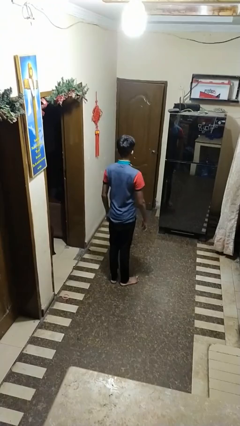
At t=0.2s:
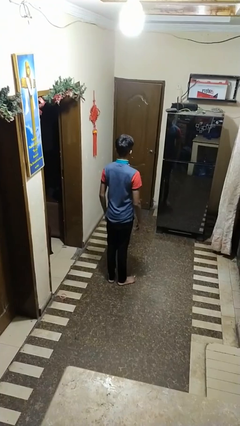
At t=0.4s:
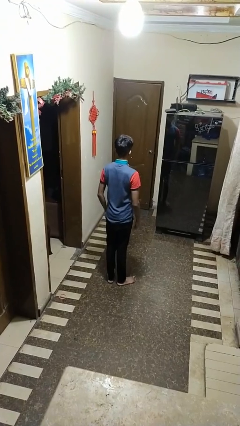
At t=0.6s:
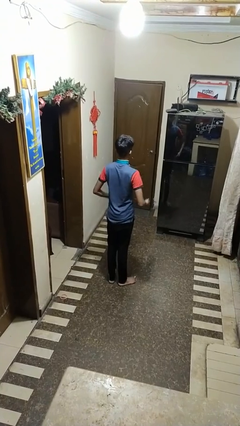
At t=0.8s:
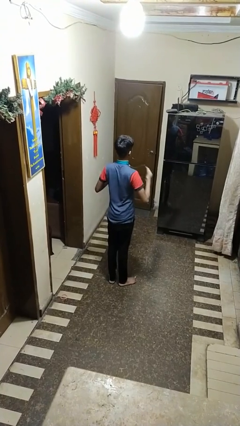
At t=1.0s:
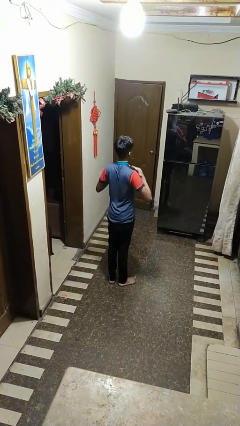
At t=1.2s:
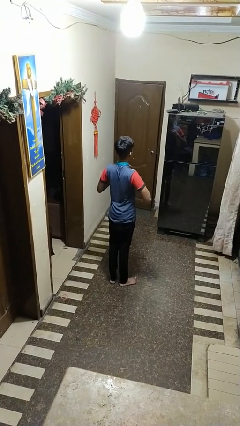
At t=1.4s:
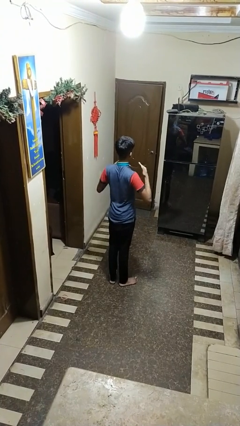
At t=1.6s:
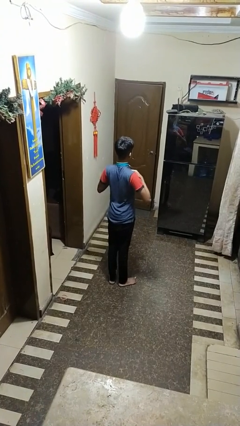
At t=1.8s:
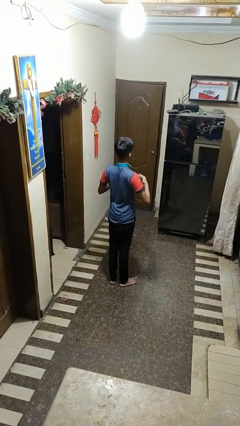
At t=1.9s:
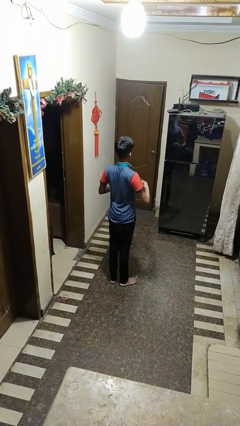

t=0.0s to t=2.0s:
person drums on chest

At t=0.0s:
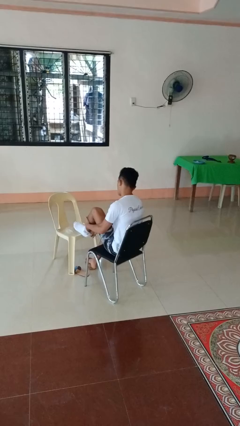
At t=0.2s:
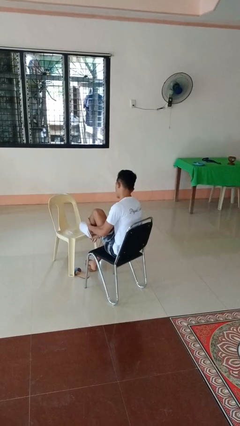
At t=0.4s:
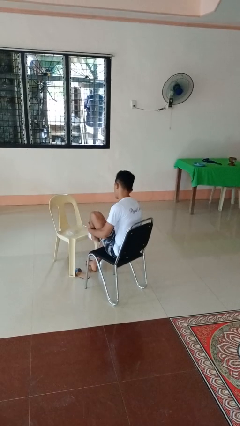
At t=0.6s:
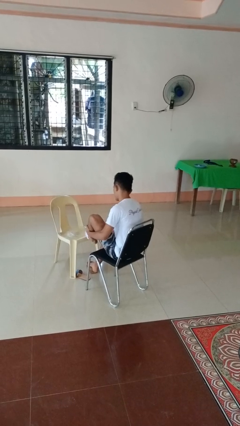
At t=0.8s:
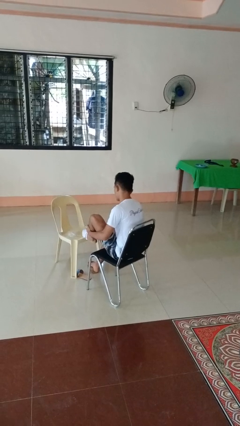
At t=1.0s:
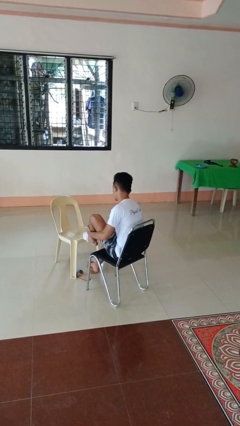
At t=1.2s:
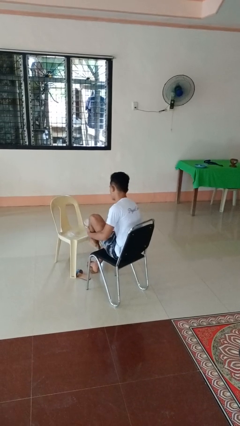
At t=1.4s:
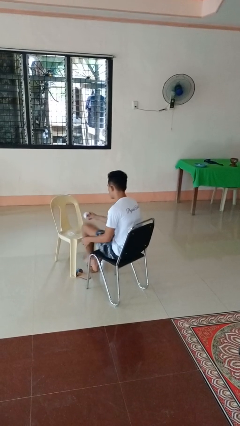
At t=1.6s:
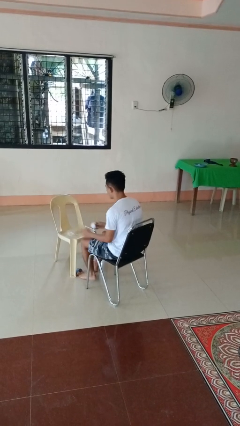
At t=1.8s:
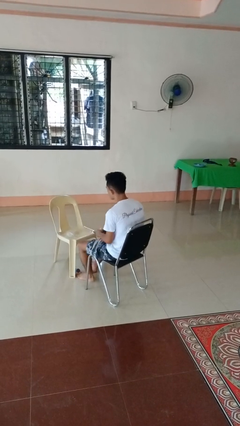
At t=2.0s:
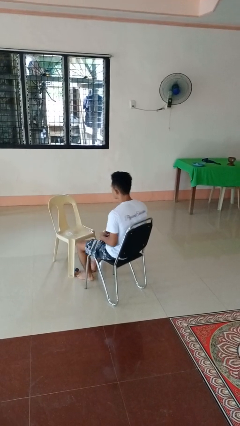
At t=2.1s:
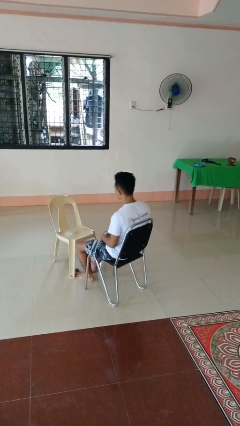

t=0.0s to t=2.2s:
person takes off socks

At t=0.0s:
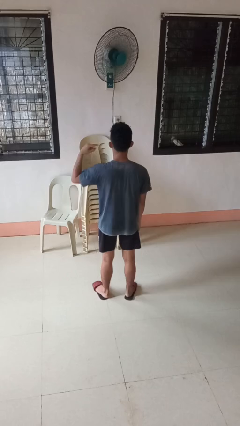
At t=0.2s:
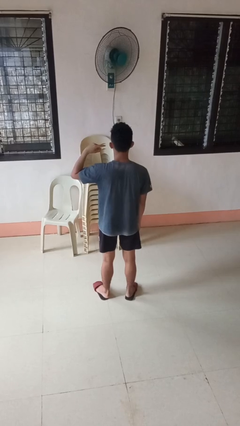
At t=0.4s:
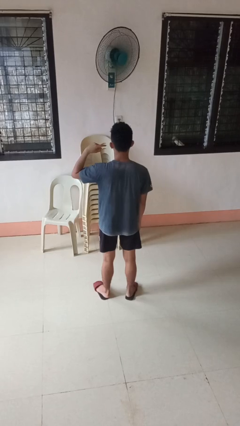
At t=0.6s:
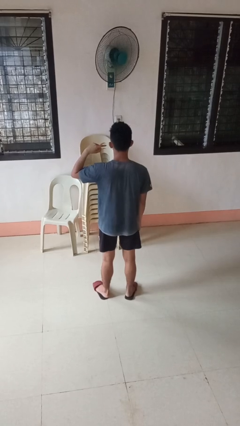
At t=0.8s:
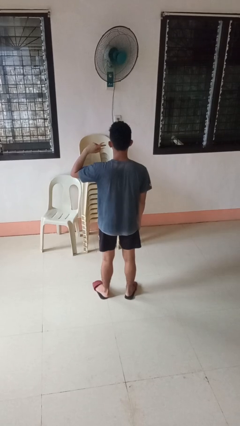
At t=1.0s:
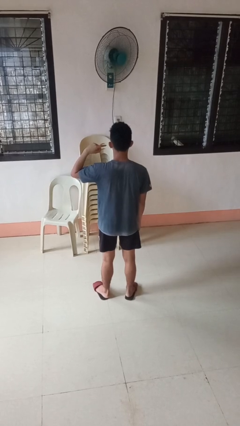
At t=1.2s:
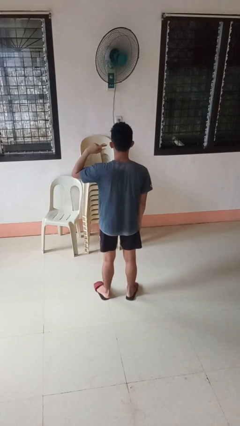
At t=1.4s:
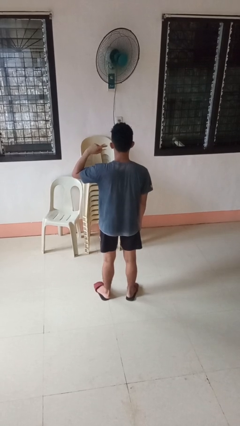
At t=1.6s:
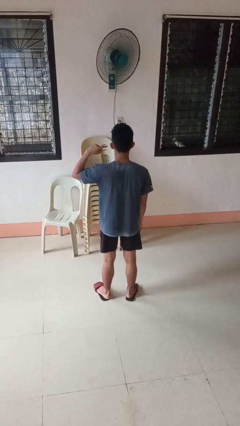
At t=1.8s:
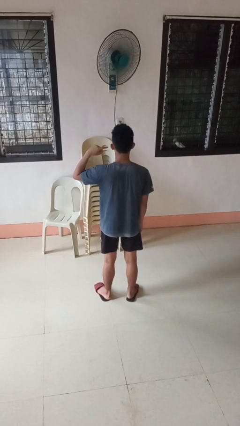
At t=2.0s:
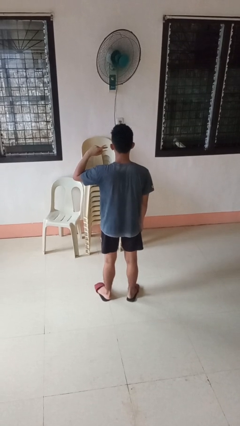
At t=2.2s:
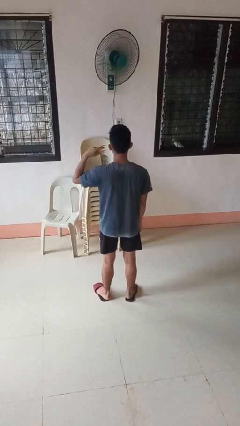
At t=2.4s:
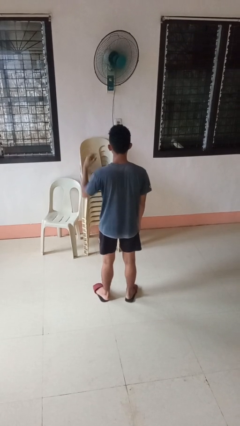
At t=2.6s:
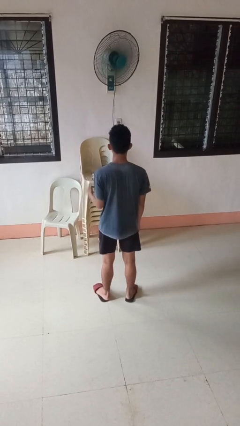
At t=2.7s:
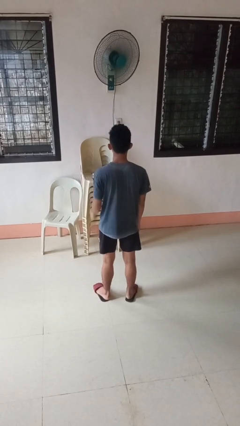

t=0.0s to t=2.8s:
person gestures listen closely

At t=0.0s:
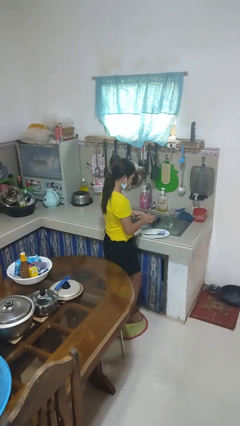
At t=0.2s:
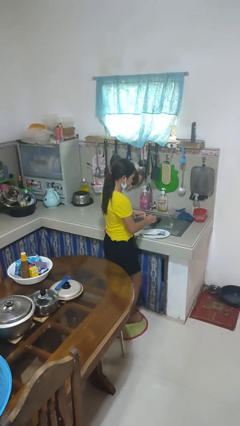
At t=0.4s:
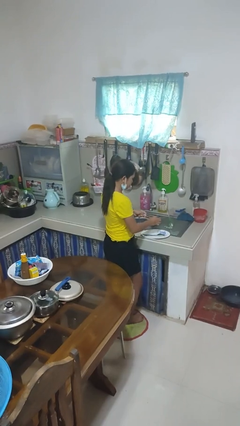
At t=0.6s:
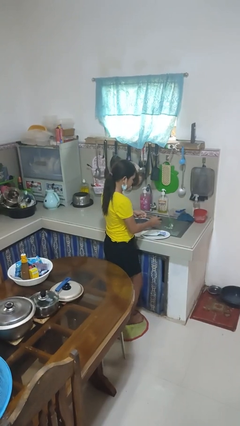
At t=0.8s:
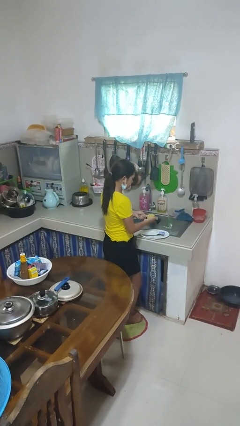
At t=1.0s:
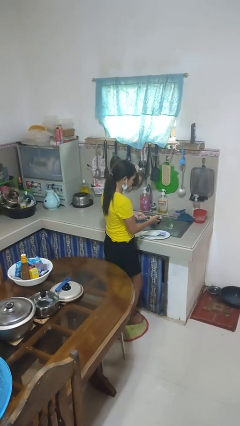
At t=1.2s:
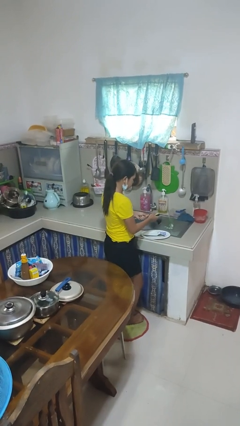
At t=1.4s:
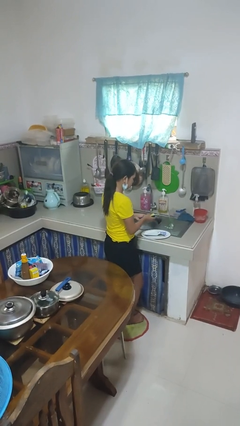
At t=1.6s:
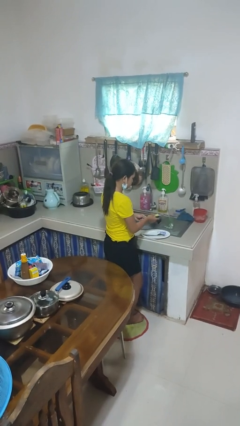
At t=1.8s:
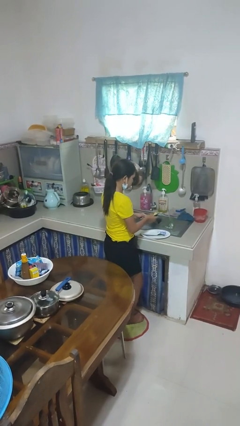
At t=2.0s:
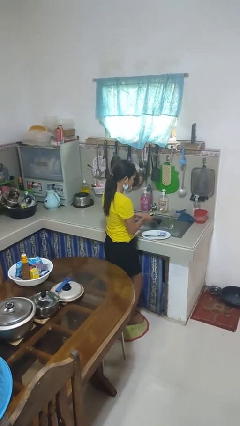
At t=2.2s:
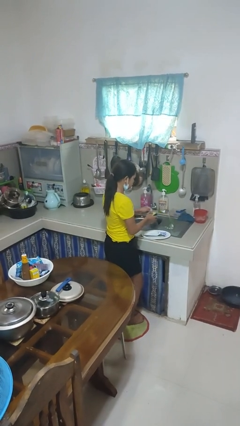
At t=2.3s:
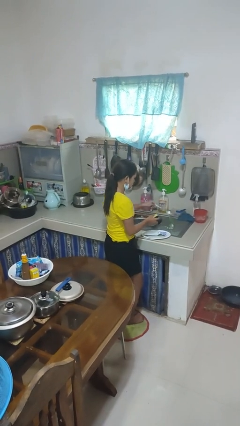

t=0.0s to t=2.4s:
person washes dish

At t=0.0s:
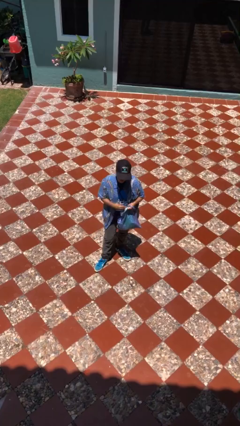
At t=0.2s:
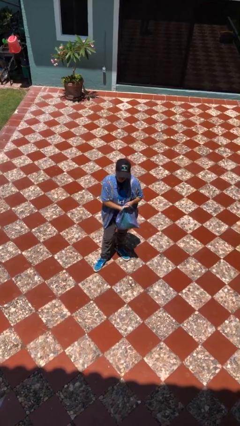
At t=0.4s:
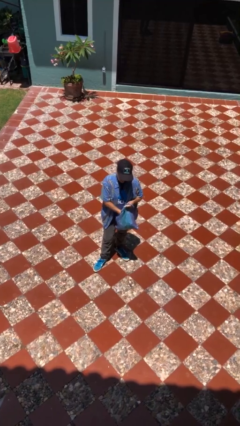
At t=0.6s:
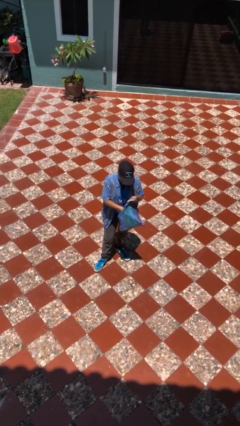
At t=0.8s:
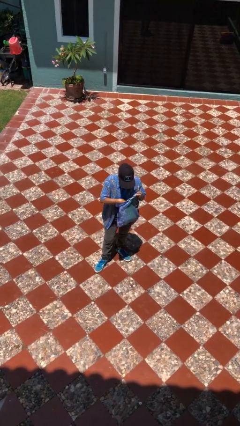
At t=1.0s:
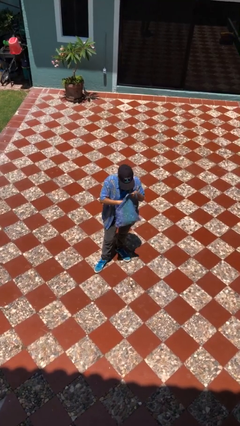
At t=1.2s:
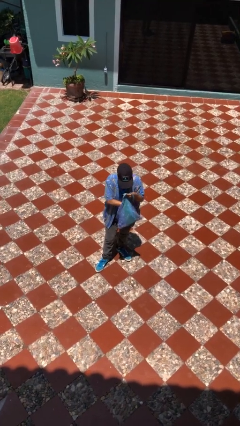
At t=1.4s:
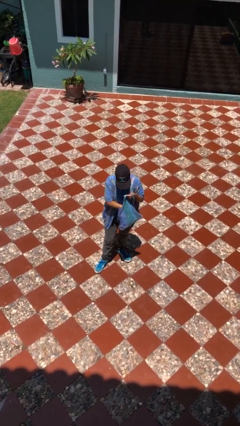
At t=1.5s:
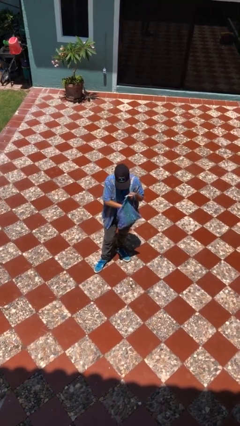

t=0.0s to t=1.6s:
person searches in purse

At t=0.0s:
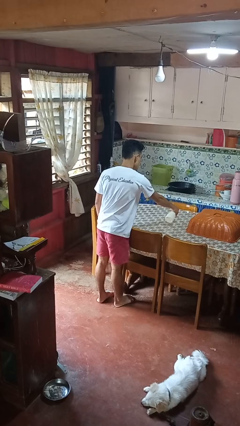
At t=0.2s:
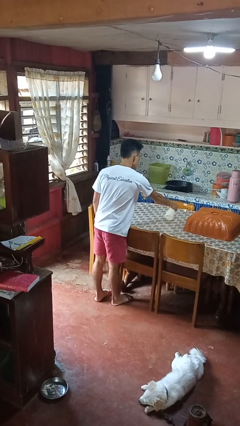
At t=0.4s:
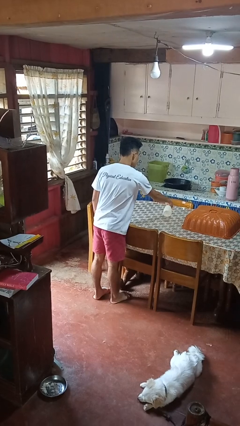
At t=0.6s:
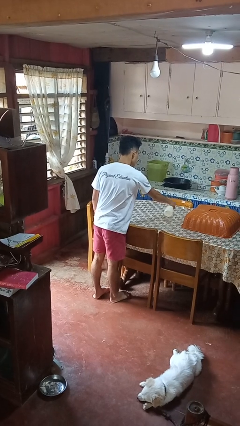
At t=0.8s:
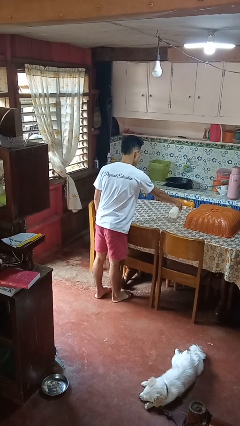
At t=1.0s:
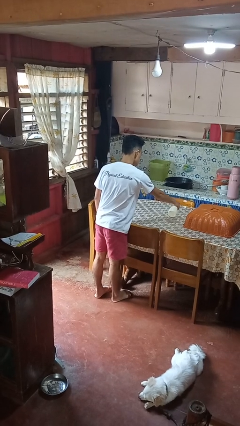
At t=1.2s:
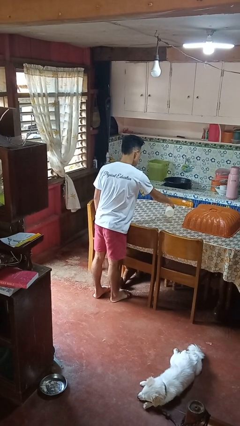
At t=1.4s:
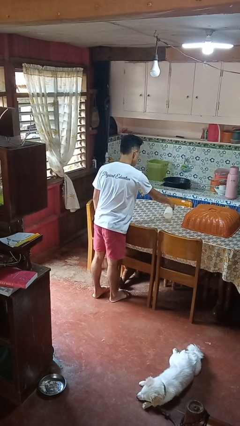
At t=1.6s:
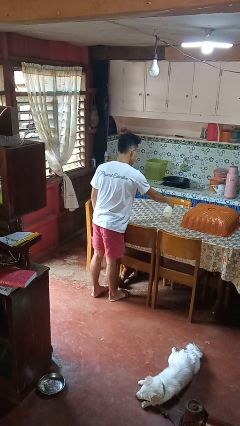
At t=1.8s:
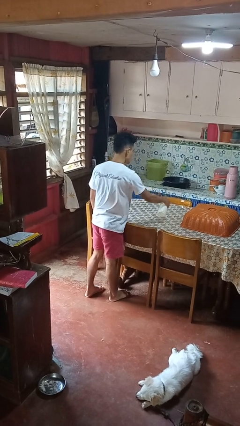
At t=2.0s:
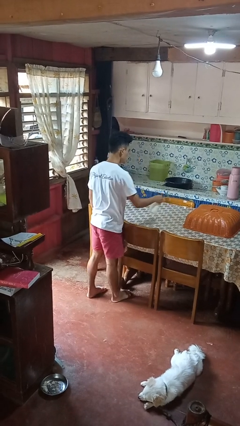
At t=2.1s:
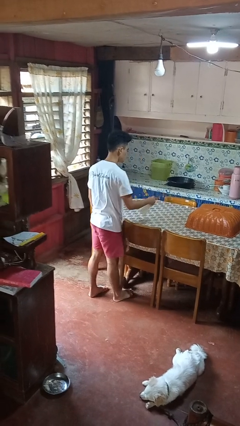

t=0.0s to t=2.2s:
person sprays from bottle

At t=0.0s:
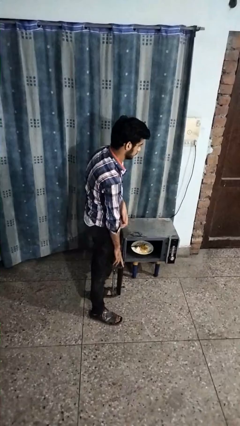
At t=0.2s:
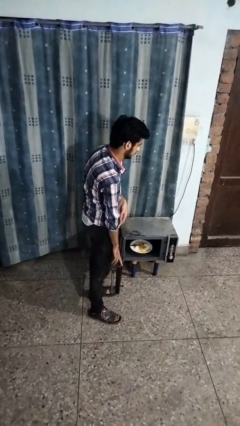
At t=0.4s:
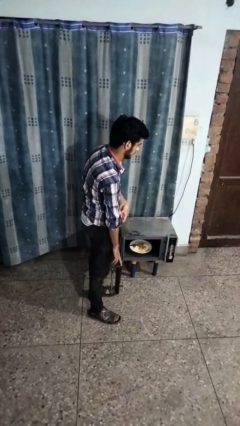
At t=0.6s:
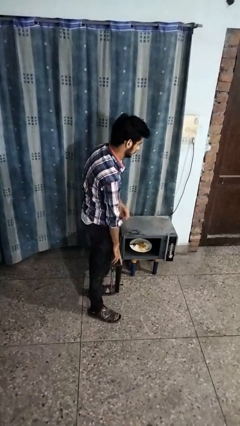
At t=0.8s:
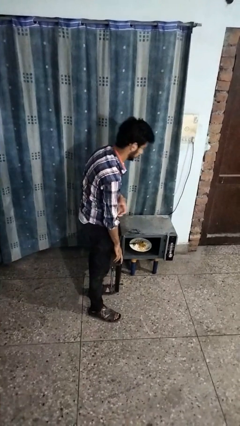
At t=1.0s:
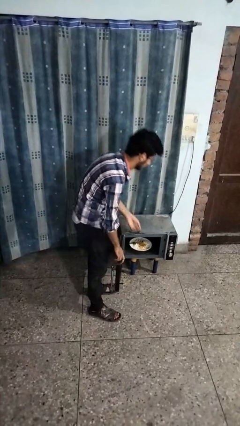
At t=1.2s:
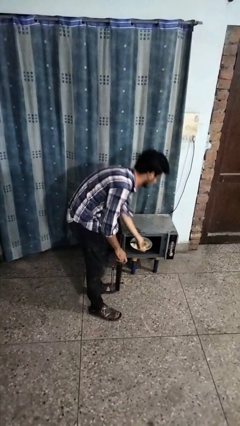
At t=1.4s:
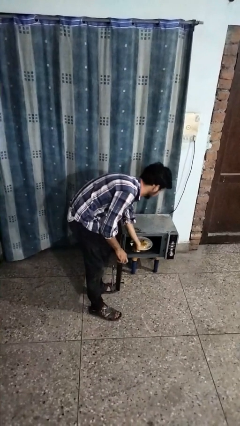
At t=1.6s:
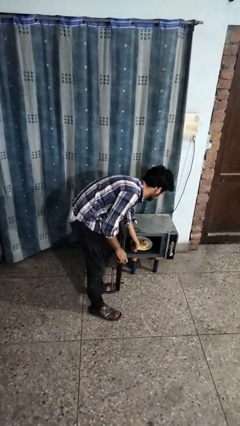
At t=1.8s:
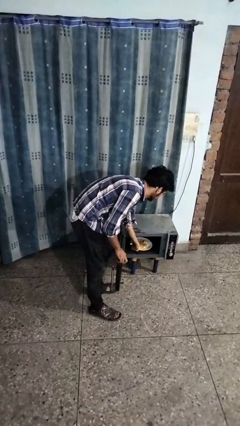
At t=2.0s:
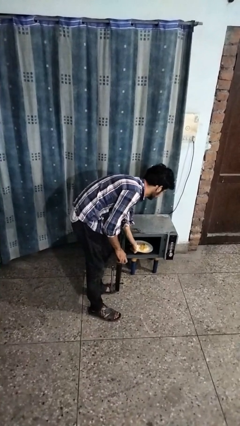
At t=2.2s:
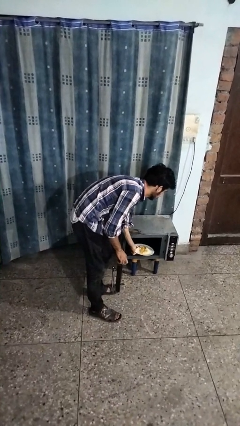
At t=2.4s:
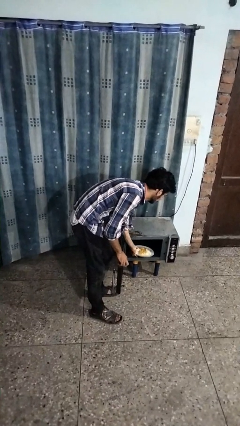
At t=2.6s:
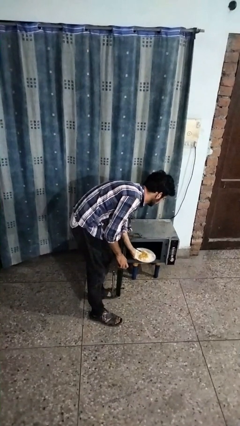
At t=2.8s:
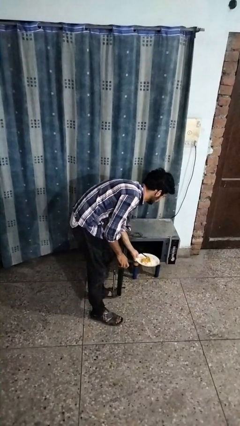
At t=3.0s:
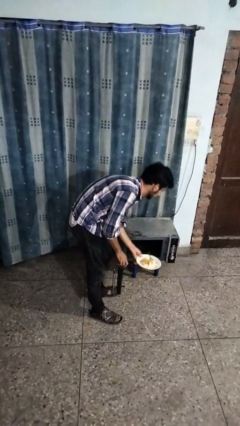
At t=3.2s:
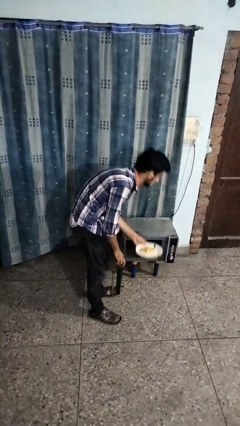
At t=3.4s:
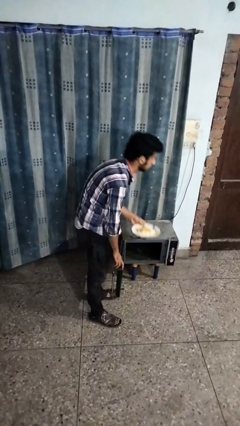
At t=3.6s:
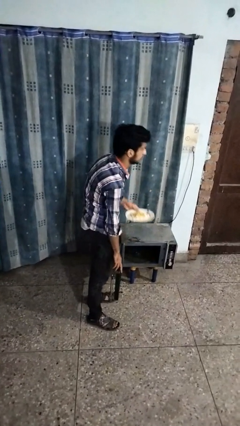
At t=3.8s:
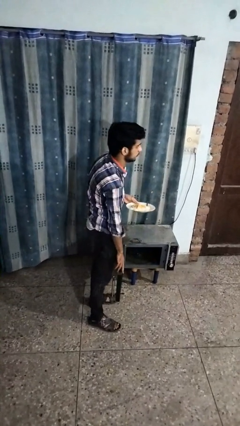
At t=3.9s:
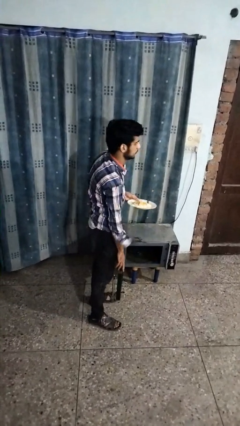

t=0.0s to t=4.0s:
person takes object from oven
